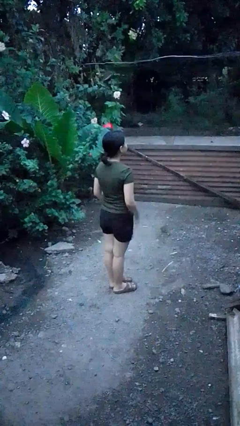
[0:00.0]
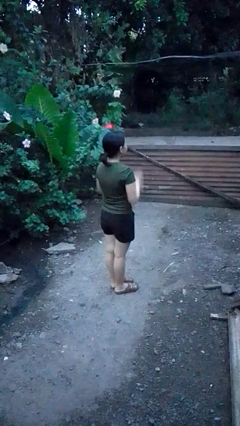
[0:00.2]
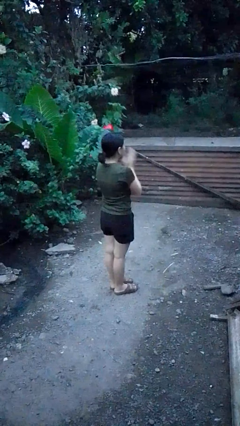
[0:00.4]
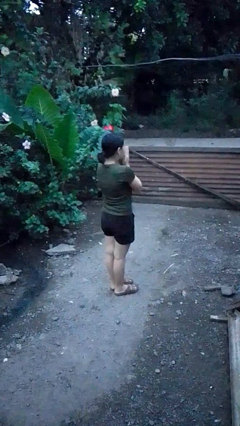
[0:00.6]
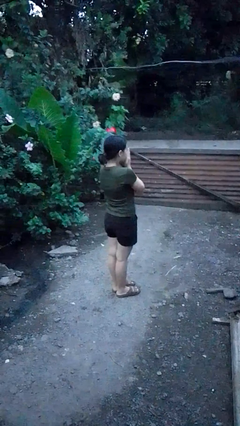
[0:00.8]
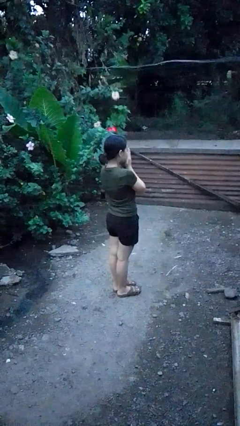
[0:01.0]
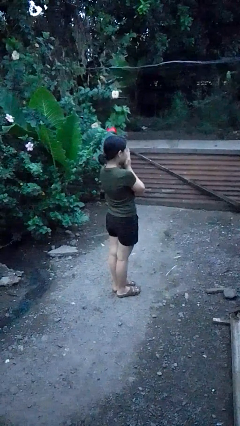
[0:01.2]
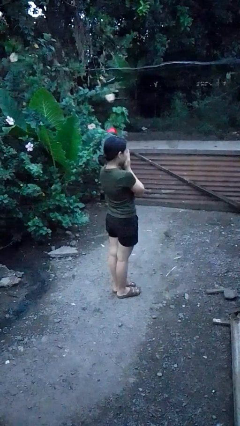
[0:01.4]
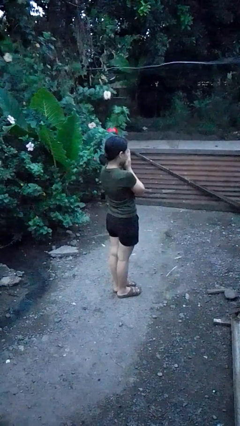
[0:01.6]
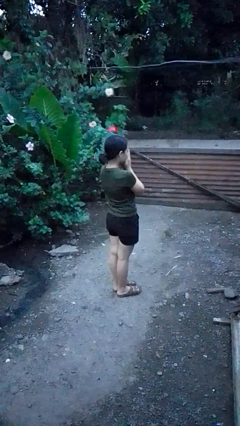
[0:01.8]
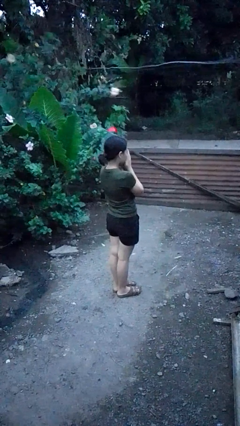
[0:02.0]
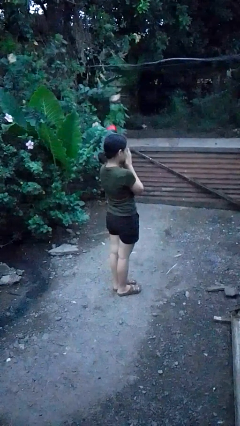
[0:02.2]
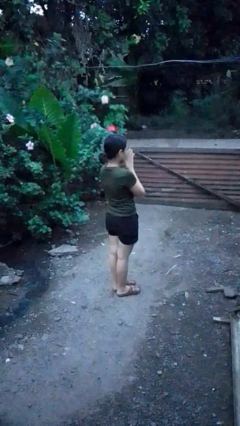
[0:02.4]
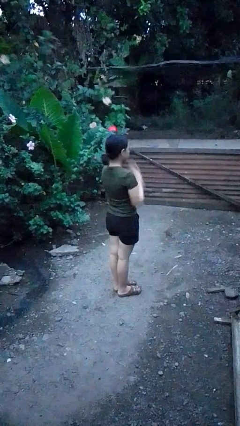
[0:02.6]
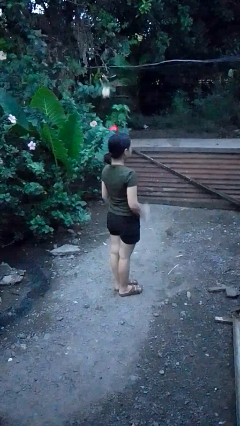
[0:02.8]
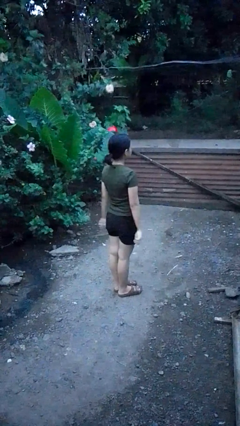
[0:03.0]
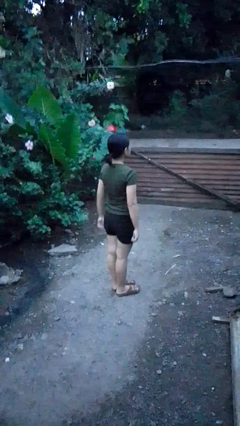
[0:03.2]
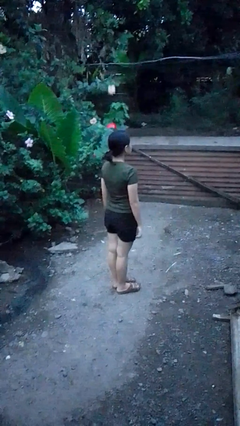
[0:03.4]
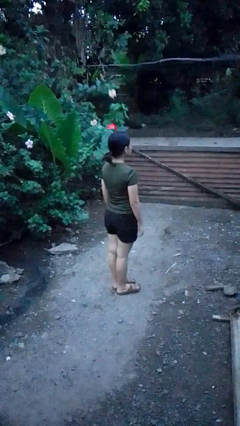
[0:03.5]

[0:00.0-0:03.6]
person blows into hands

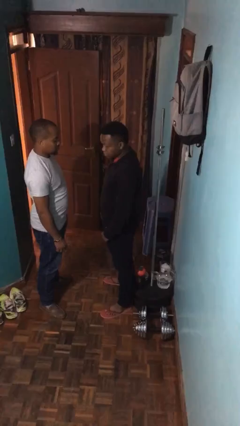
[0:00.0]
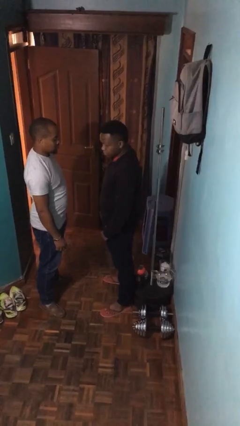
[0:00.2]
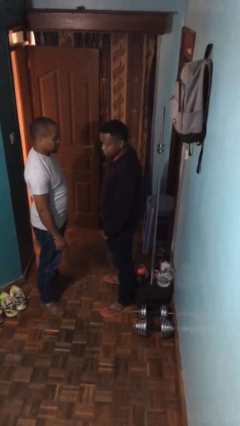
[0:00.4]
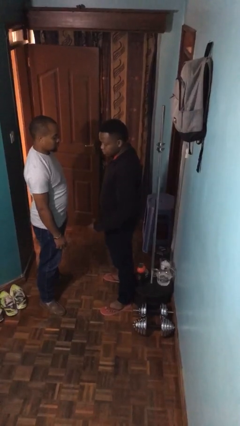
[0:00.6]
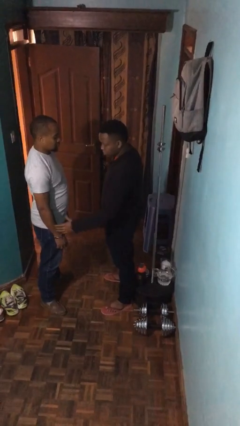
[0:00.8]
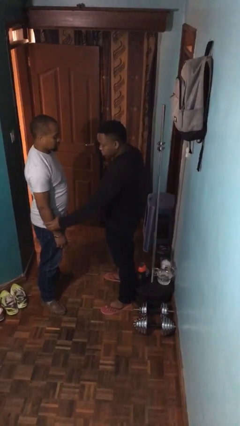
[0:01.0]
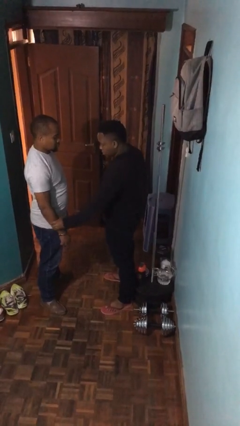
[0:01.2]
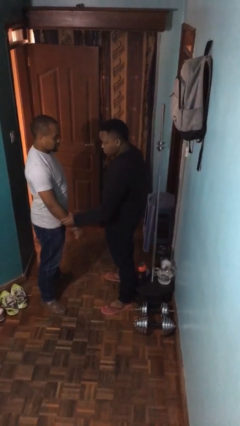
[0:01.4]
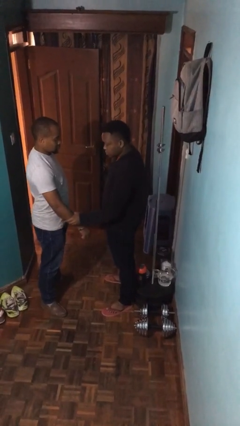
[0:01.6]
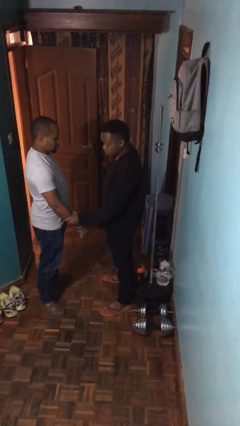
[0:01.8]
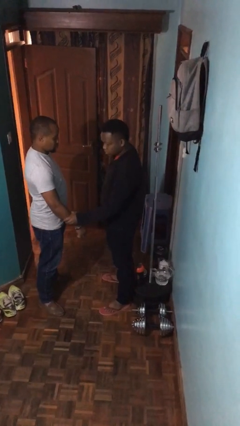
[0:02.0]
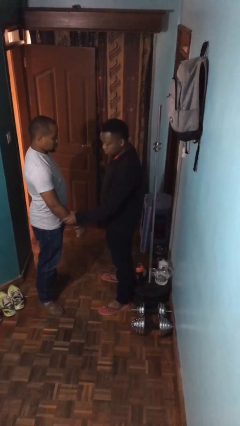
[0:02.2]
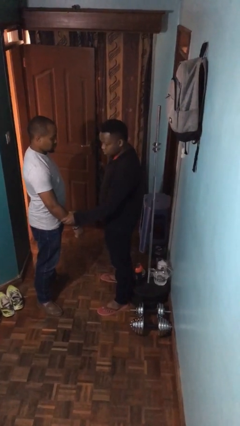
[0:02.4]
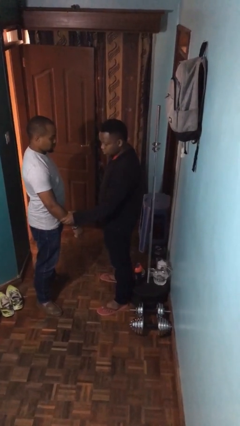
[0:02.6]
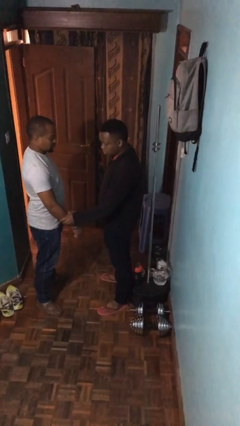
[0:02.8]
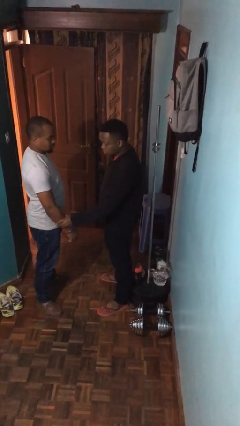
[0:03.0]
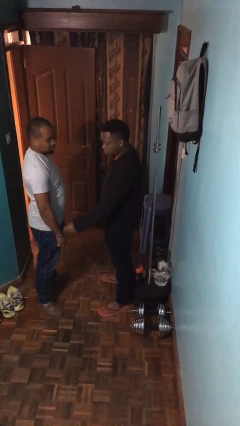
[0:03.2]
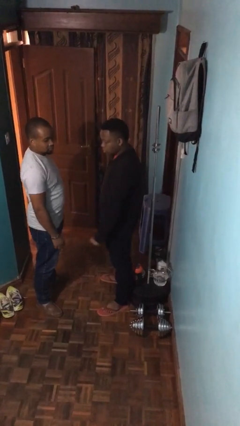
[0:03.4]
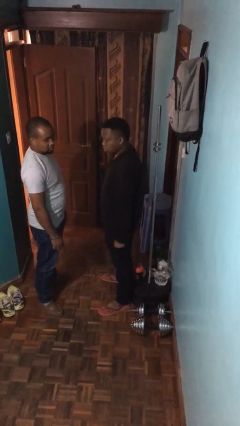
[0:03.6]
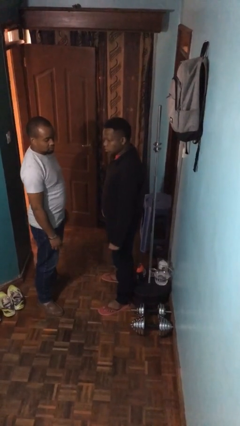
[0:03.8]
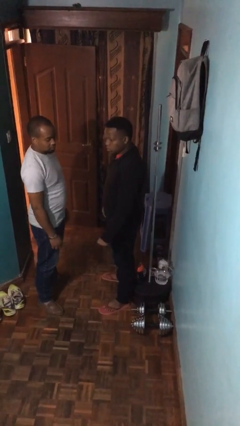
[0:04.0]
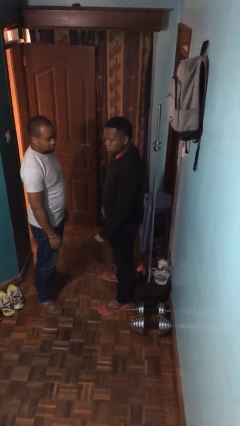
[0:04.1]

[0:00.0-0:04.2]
person grabs person by forearm

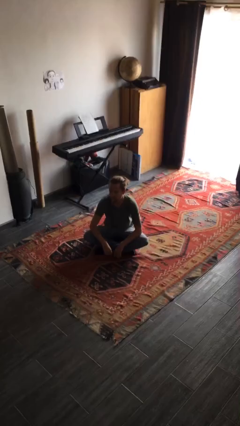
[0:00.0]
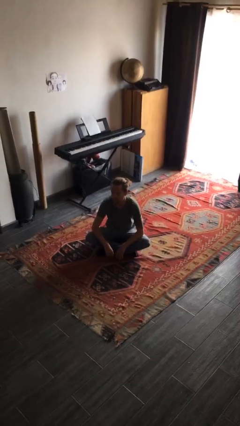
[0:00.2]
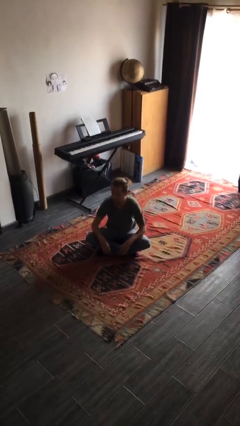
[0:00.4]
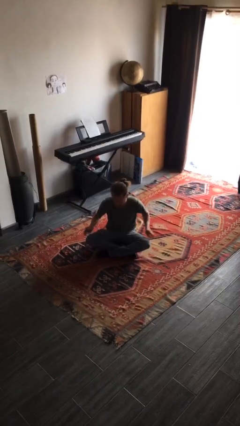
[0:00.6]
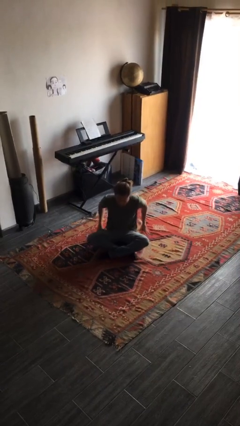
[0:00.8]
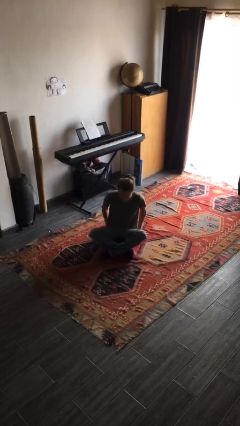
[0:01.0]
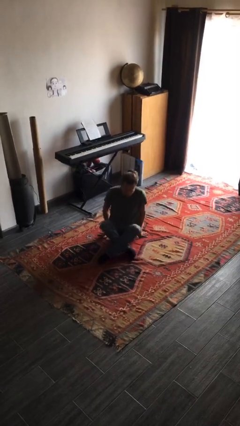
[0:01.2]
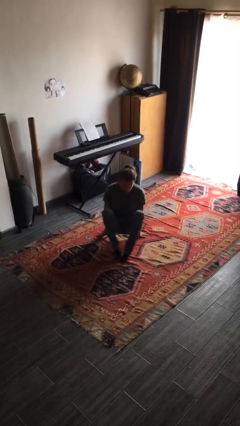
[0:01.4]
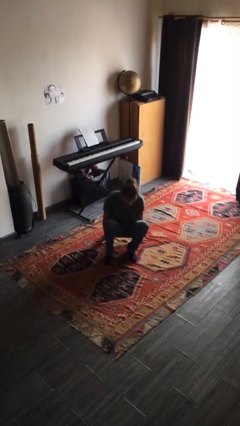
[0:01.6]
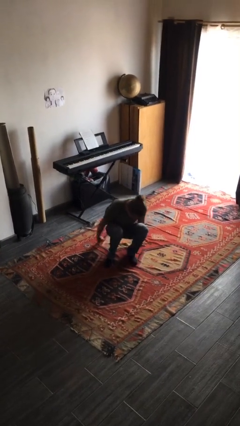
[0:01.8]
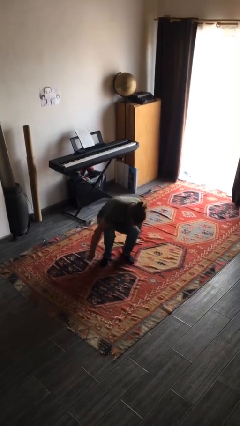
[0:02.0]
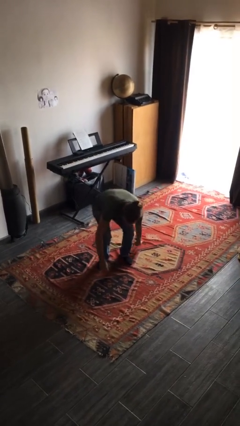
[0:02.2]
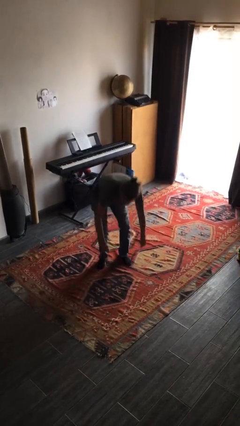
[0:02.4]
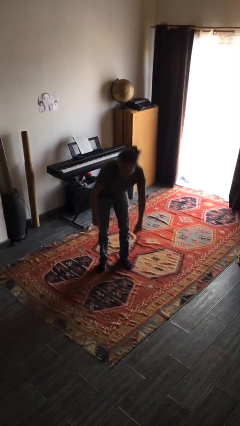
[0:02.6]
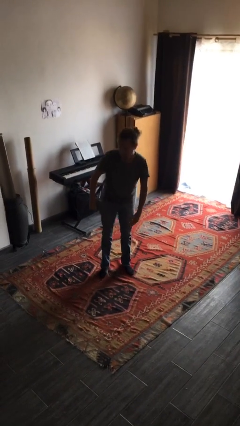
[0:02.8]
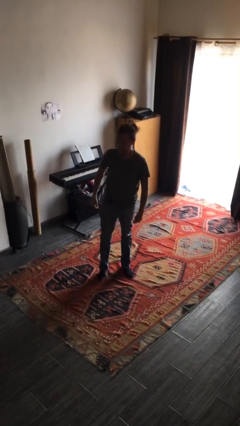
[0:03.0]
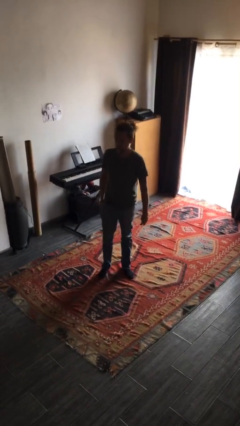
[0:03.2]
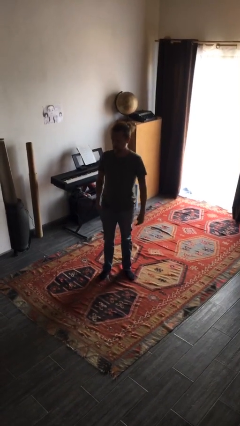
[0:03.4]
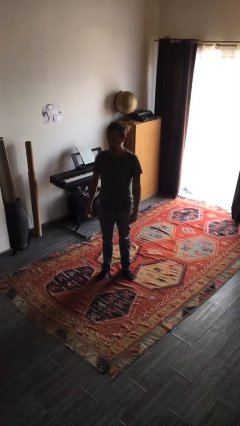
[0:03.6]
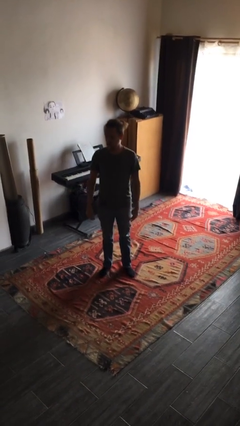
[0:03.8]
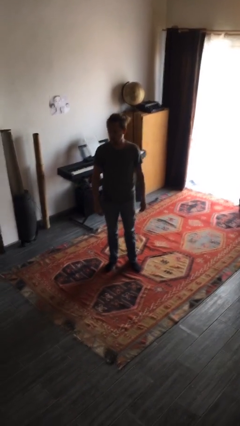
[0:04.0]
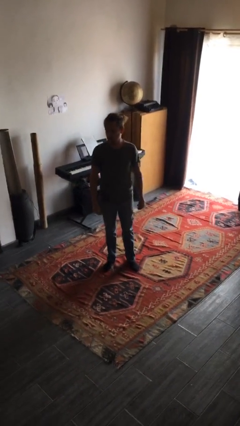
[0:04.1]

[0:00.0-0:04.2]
person stands up from floor

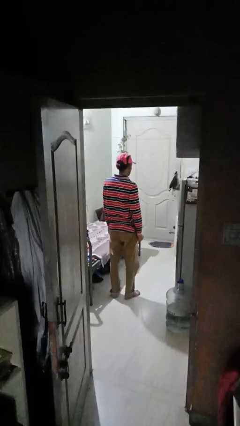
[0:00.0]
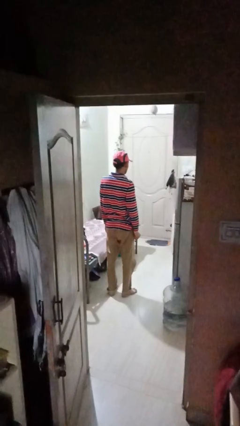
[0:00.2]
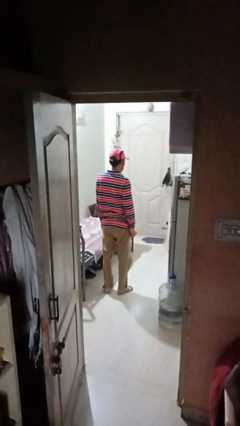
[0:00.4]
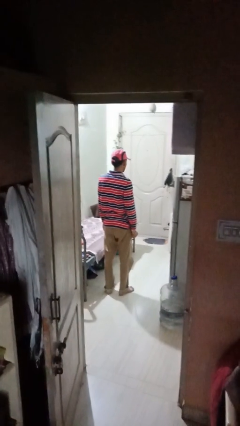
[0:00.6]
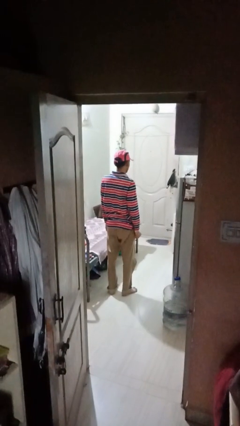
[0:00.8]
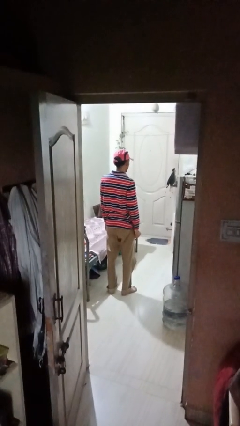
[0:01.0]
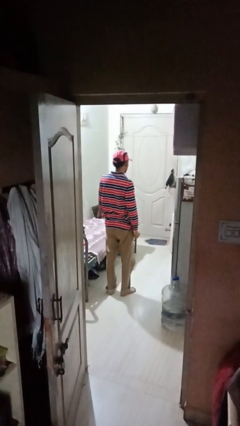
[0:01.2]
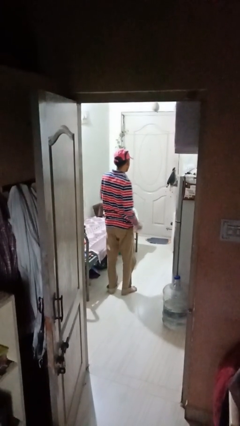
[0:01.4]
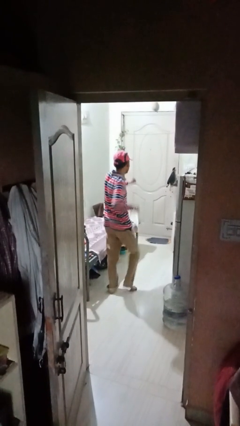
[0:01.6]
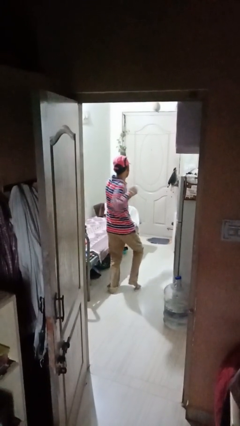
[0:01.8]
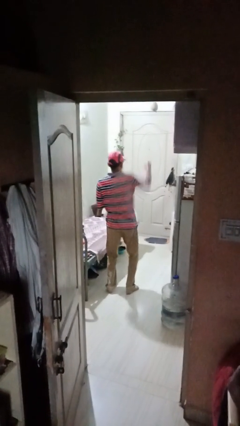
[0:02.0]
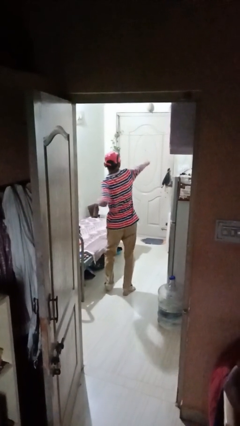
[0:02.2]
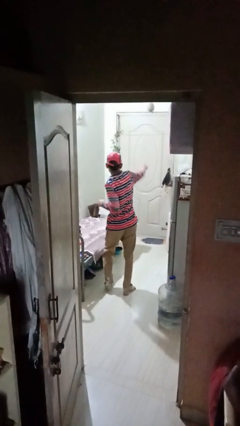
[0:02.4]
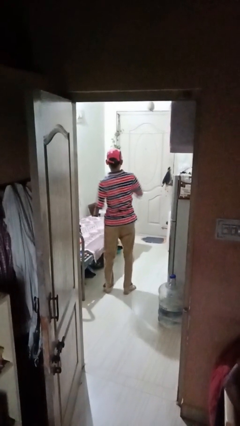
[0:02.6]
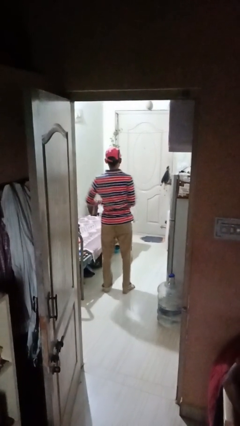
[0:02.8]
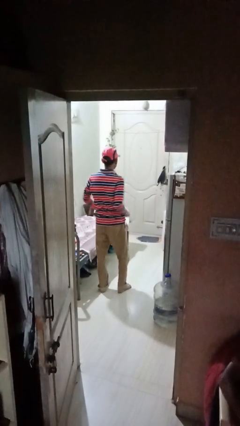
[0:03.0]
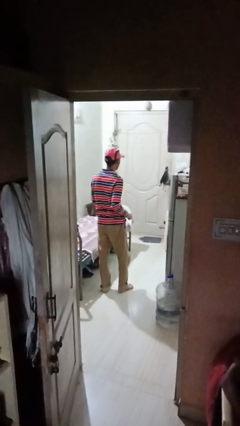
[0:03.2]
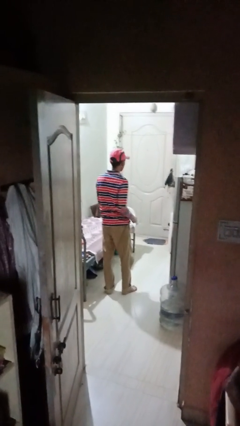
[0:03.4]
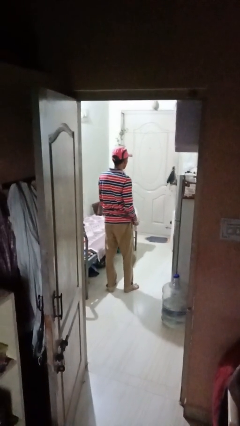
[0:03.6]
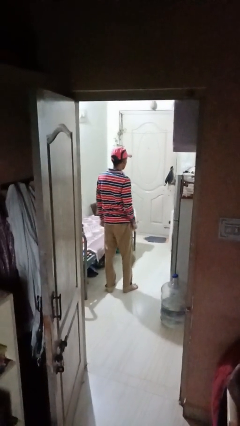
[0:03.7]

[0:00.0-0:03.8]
person punches

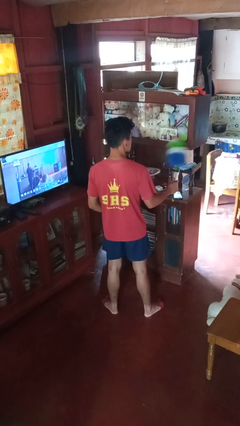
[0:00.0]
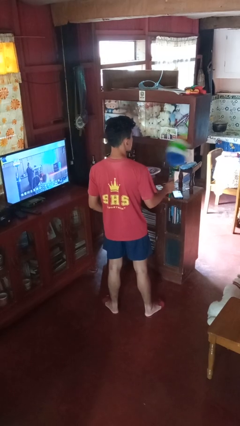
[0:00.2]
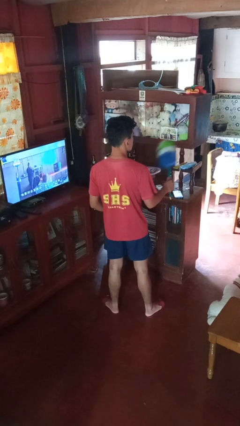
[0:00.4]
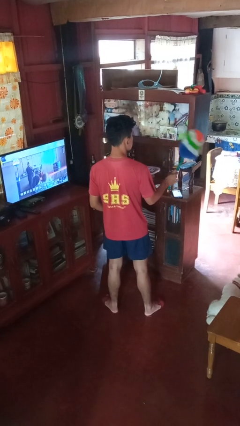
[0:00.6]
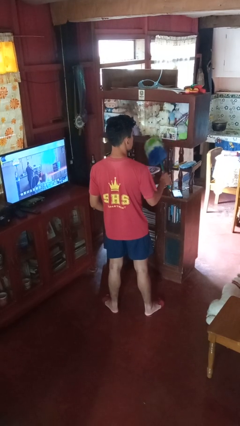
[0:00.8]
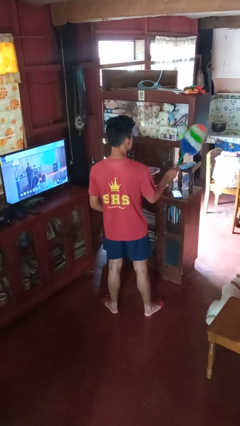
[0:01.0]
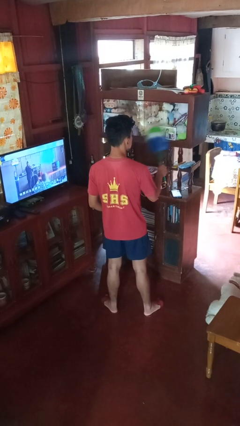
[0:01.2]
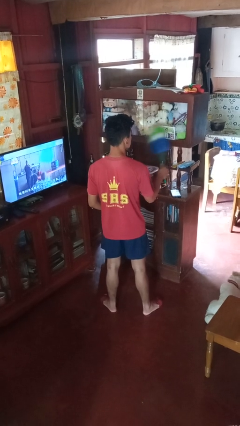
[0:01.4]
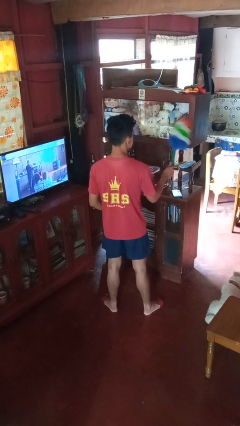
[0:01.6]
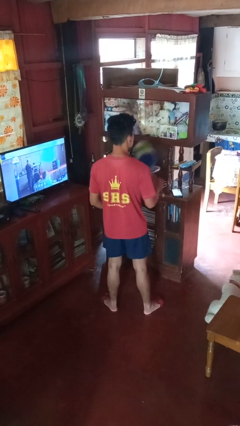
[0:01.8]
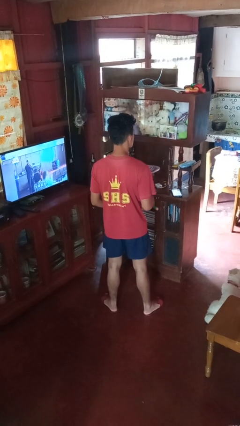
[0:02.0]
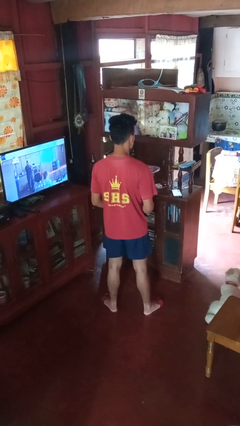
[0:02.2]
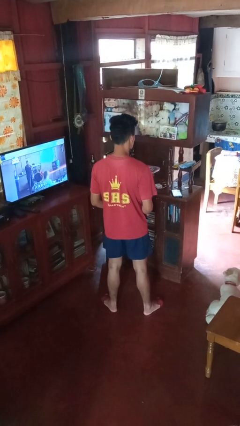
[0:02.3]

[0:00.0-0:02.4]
person dusts furniture
